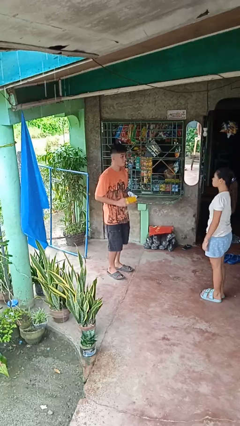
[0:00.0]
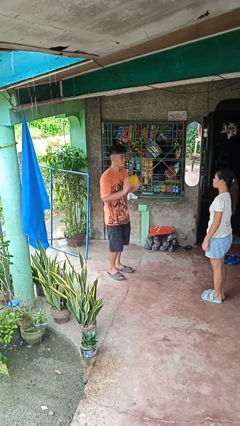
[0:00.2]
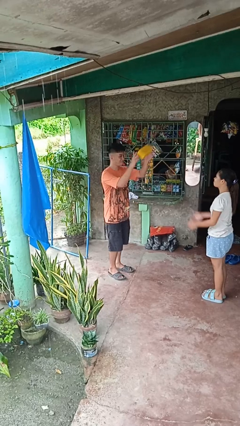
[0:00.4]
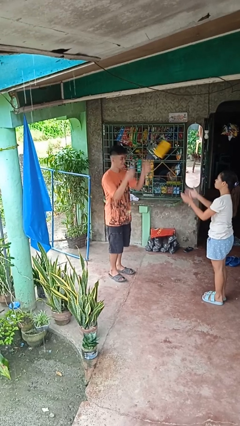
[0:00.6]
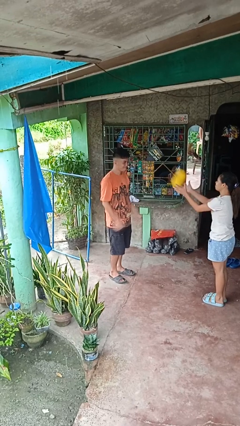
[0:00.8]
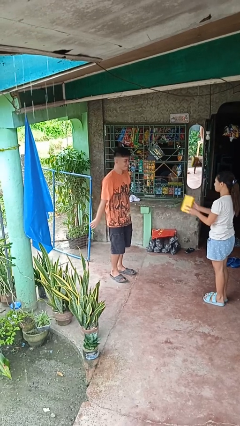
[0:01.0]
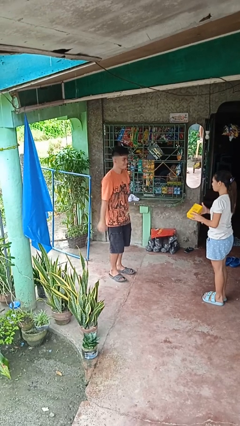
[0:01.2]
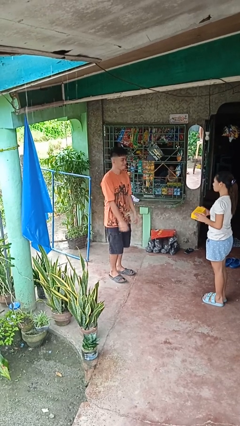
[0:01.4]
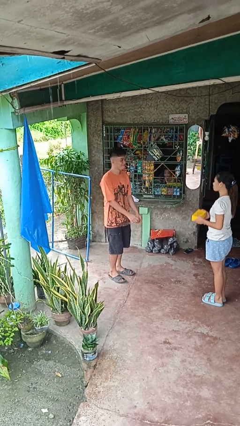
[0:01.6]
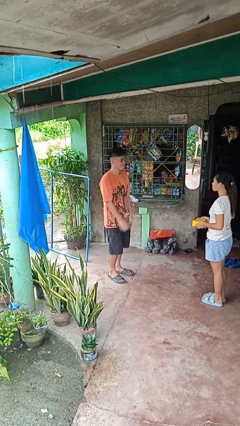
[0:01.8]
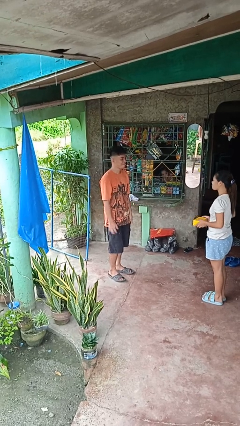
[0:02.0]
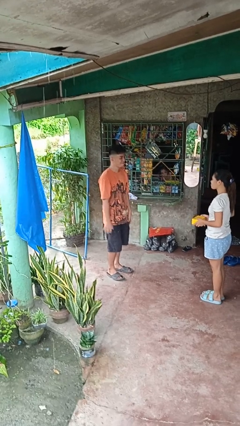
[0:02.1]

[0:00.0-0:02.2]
person throws object to person

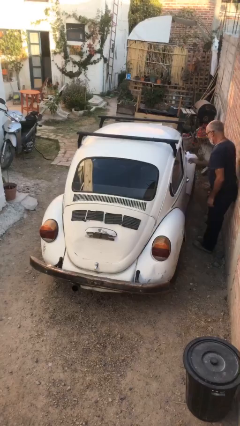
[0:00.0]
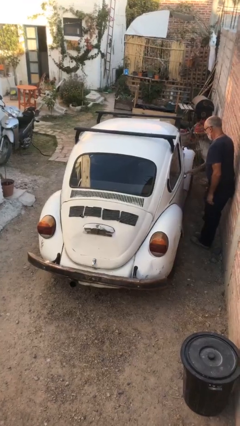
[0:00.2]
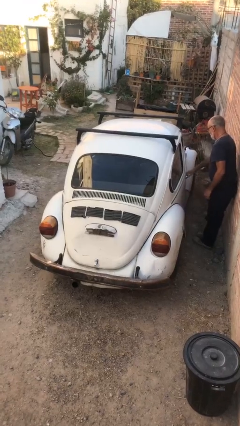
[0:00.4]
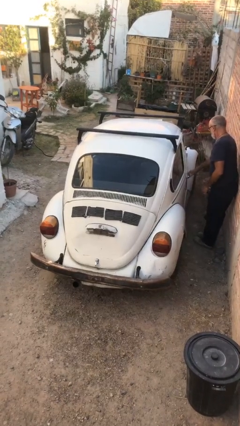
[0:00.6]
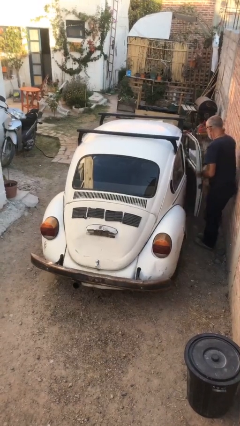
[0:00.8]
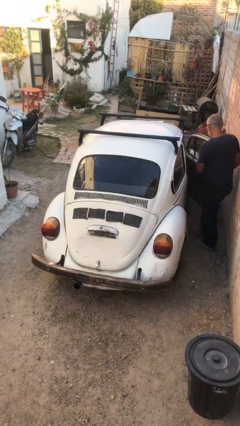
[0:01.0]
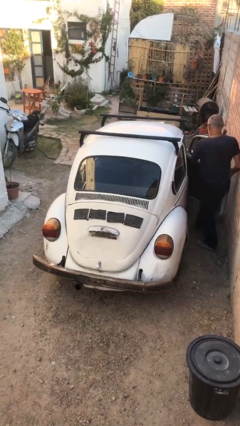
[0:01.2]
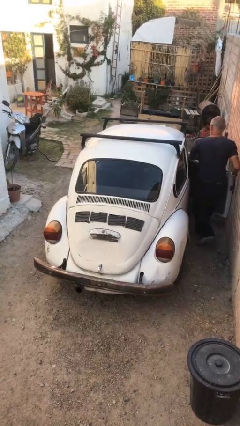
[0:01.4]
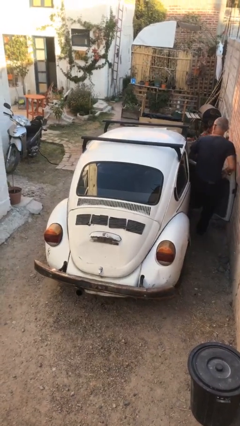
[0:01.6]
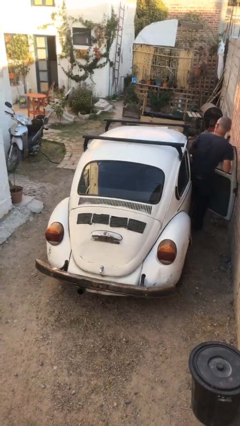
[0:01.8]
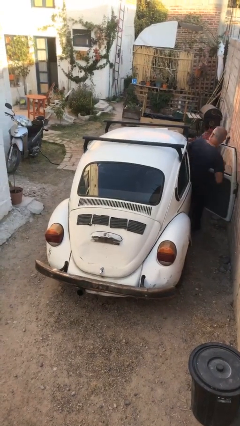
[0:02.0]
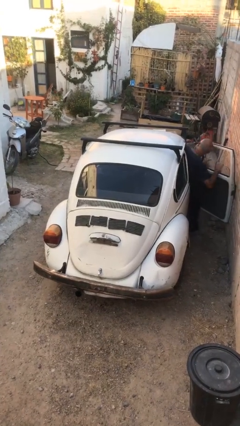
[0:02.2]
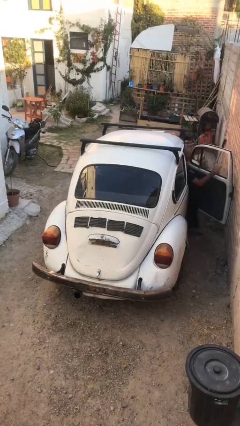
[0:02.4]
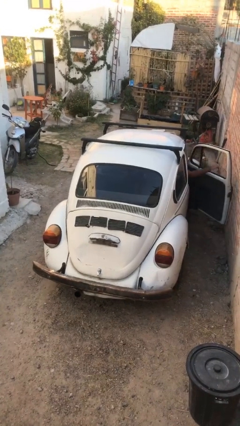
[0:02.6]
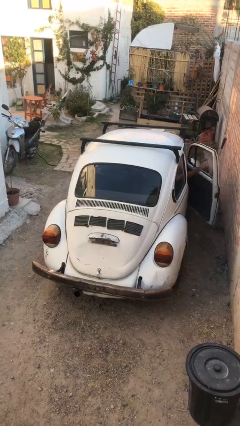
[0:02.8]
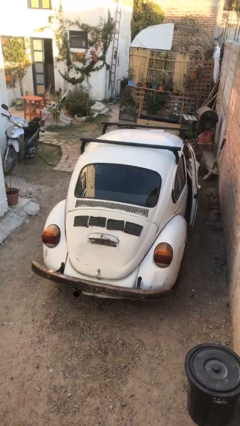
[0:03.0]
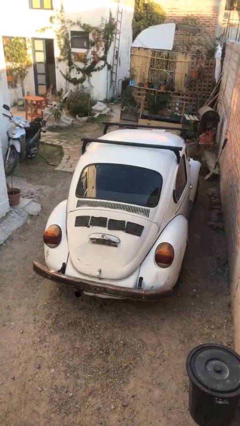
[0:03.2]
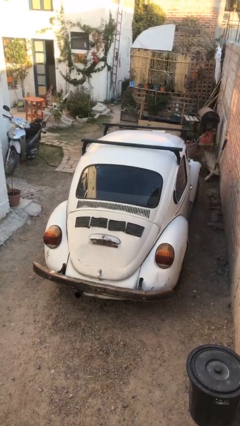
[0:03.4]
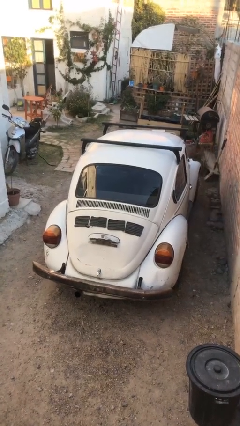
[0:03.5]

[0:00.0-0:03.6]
car picks up person

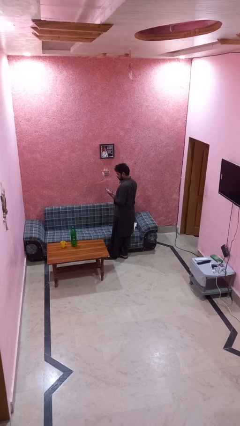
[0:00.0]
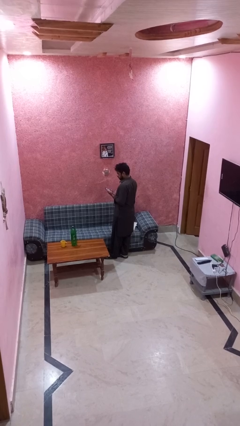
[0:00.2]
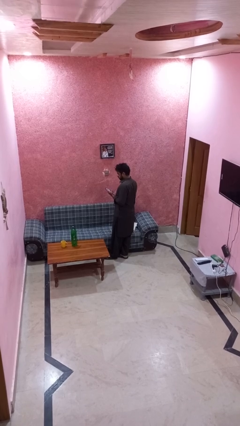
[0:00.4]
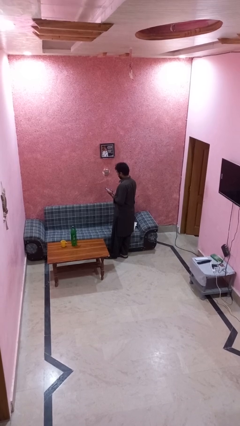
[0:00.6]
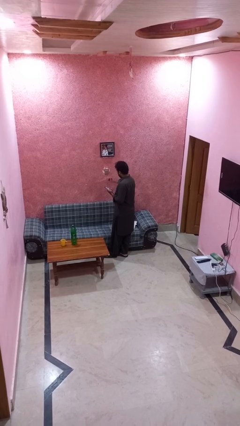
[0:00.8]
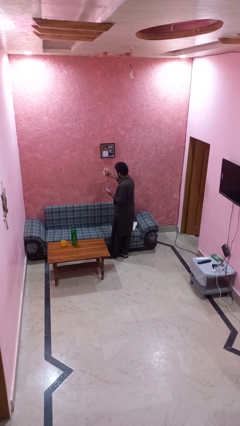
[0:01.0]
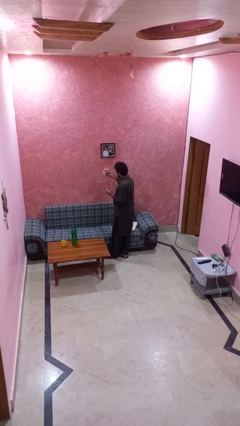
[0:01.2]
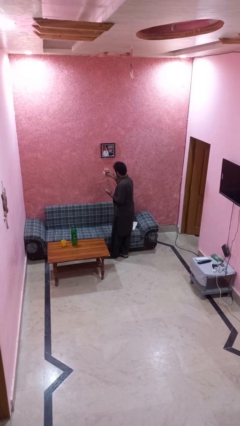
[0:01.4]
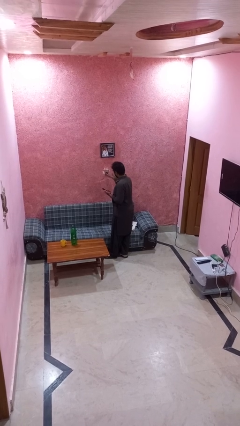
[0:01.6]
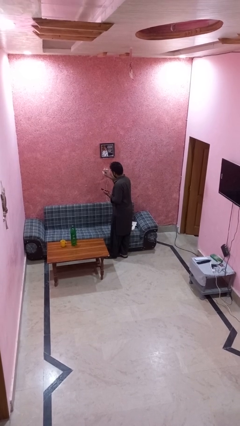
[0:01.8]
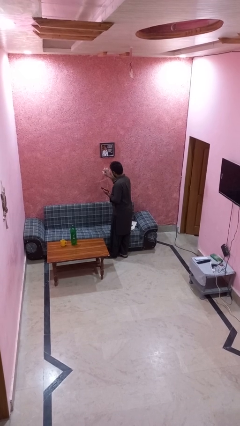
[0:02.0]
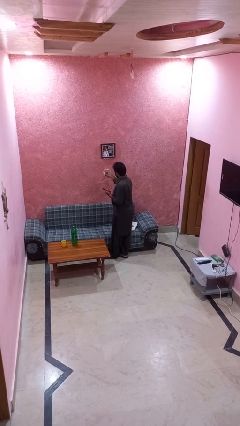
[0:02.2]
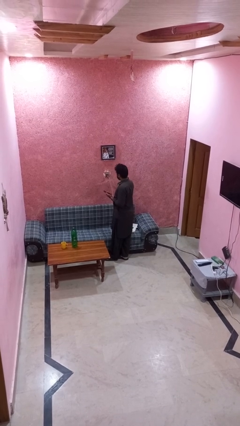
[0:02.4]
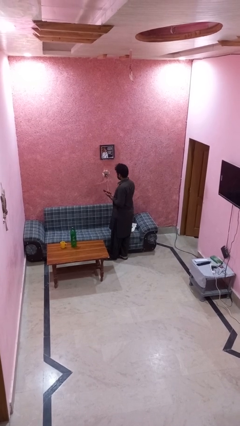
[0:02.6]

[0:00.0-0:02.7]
person plugs into electrical socket

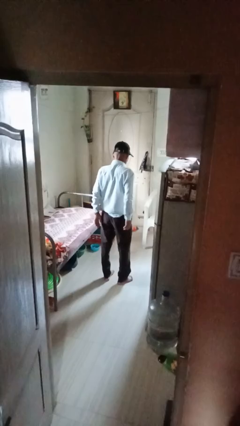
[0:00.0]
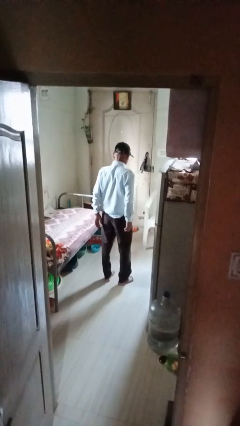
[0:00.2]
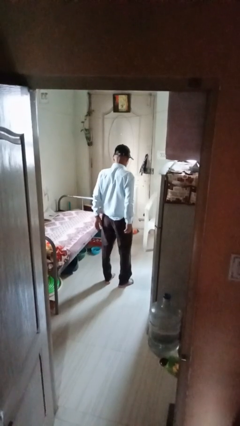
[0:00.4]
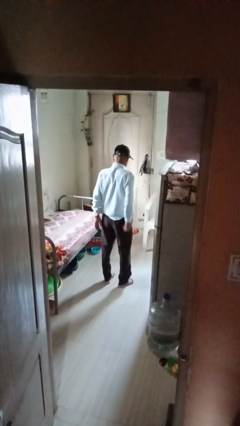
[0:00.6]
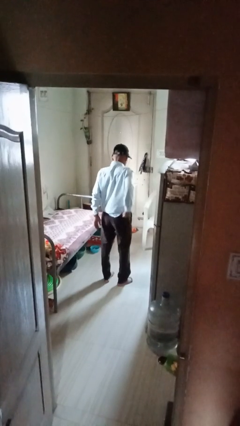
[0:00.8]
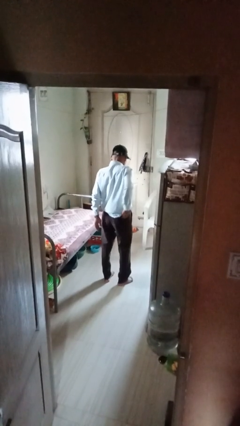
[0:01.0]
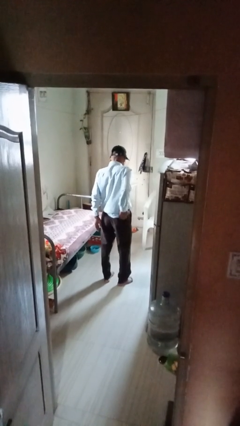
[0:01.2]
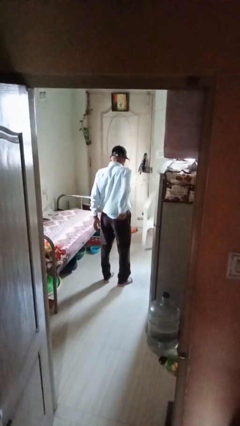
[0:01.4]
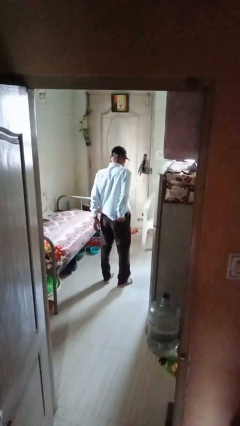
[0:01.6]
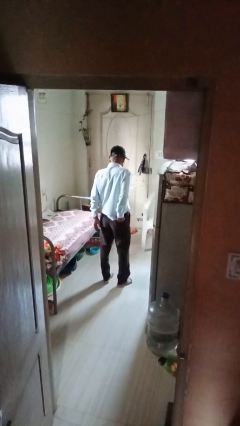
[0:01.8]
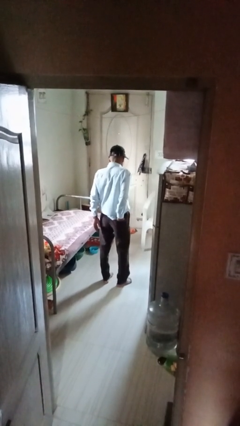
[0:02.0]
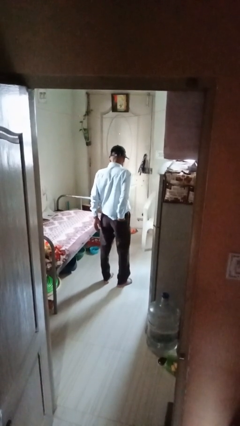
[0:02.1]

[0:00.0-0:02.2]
person puts hands in back pockets

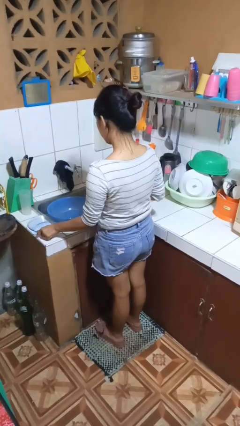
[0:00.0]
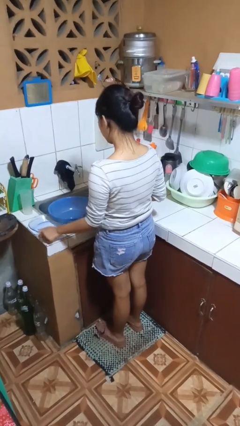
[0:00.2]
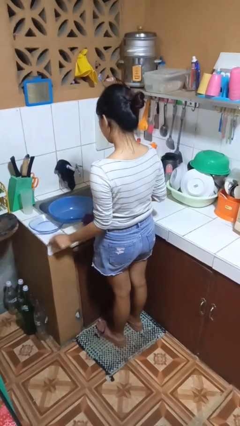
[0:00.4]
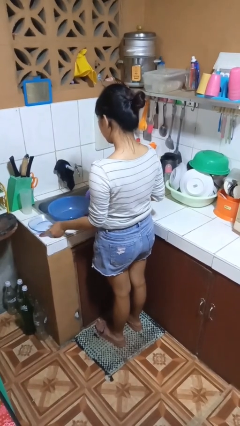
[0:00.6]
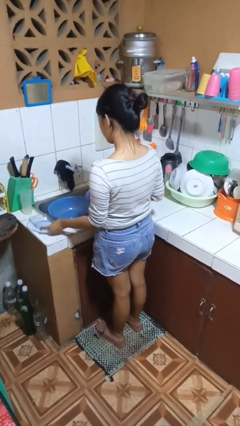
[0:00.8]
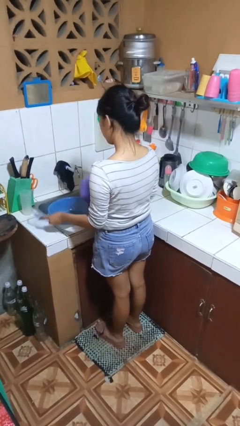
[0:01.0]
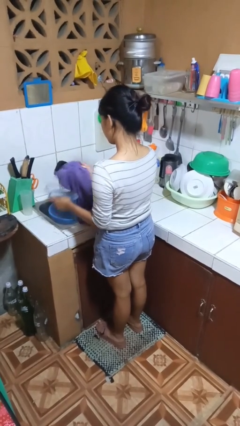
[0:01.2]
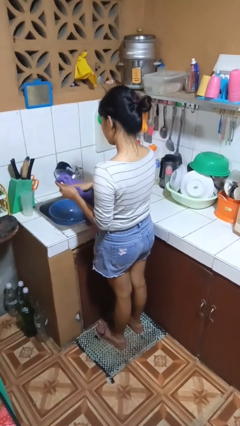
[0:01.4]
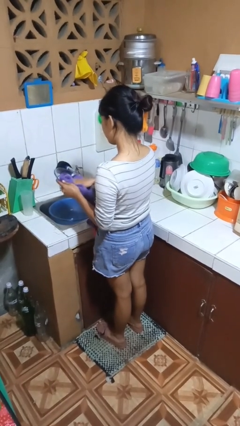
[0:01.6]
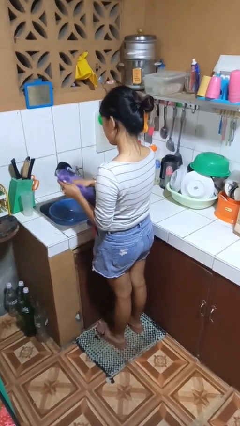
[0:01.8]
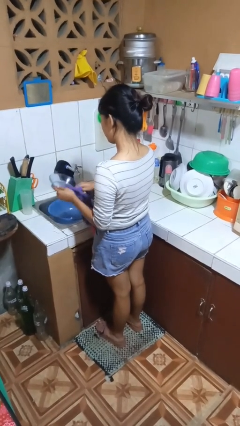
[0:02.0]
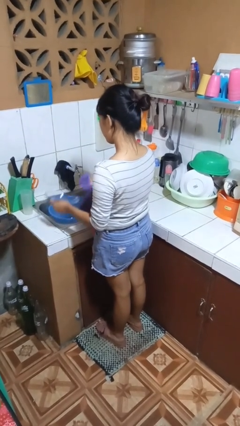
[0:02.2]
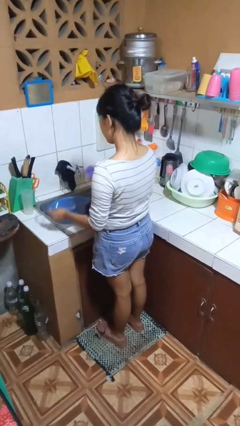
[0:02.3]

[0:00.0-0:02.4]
person dries dish

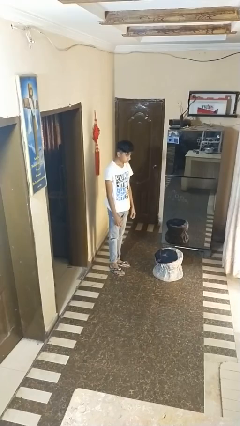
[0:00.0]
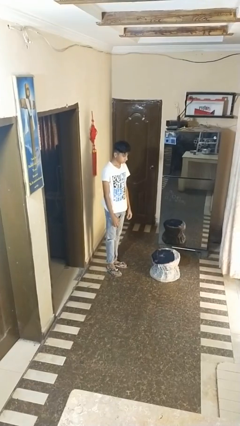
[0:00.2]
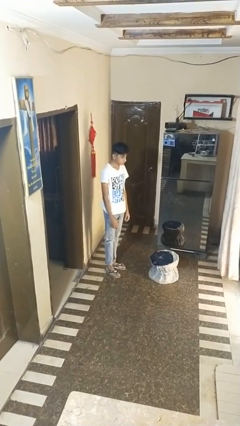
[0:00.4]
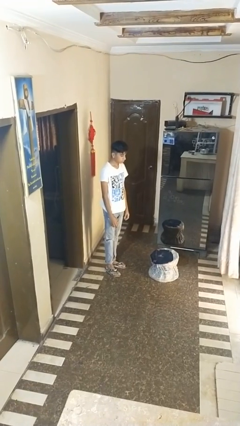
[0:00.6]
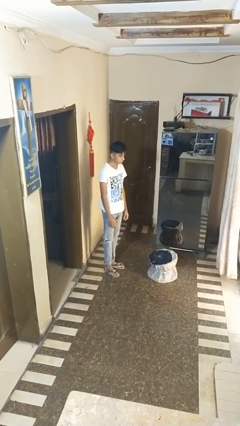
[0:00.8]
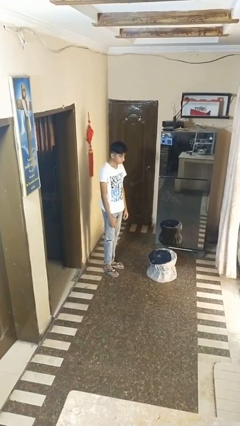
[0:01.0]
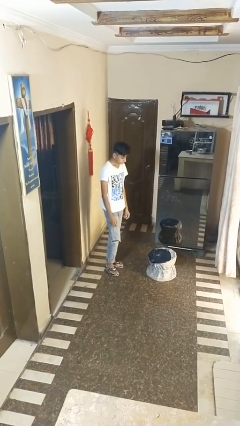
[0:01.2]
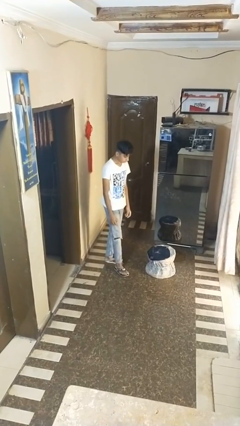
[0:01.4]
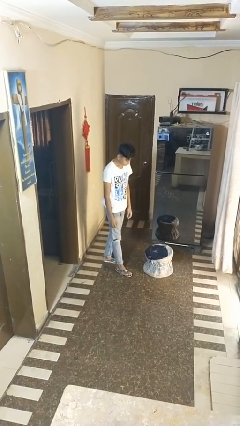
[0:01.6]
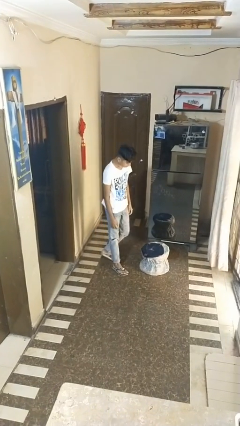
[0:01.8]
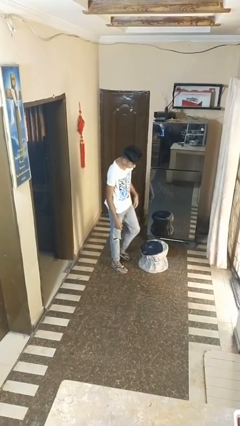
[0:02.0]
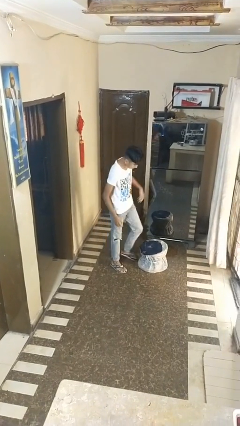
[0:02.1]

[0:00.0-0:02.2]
person trips on object on floor

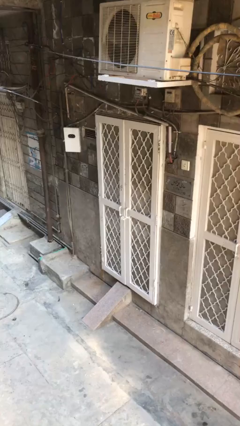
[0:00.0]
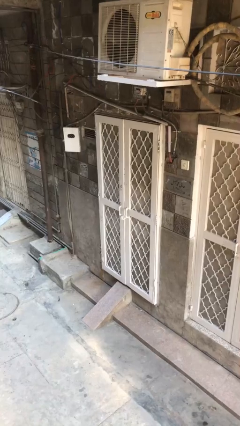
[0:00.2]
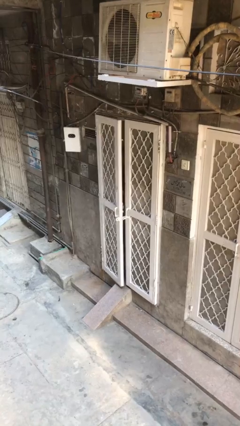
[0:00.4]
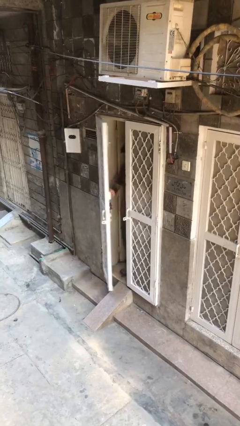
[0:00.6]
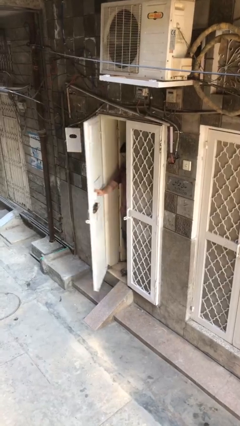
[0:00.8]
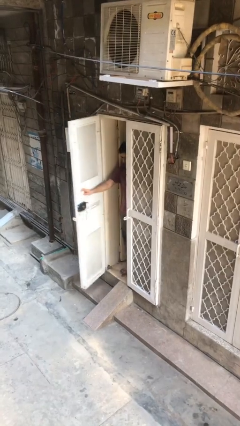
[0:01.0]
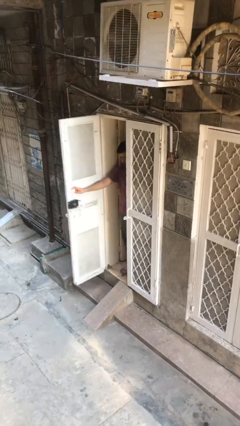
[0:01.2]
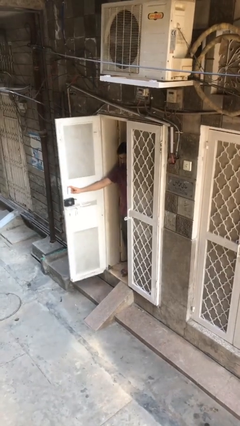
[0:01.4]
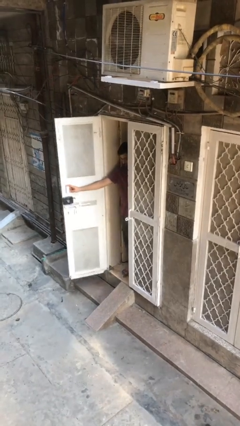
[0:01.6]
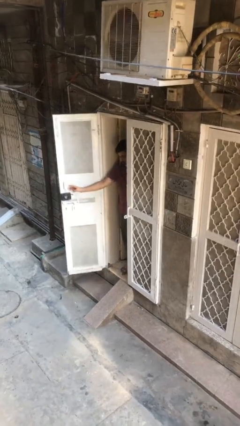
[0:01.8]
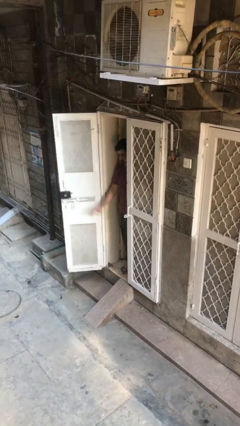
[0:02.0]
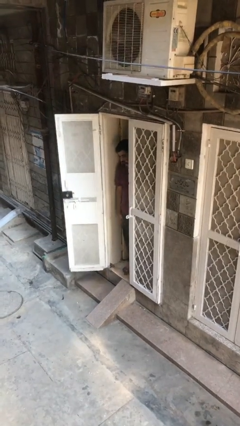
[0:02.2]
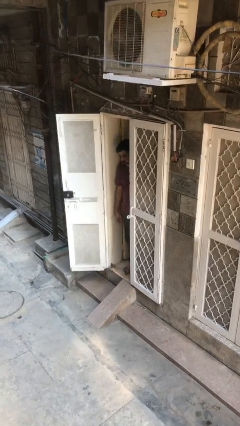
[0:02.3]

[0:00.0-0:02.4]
person opens facility door
